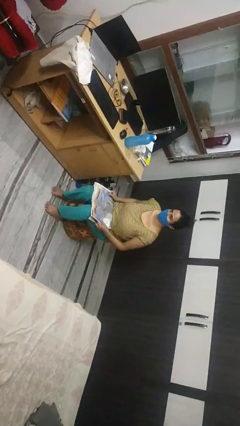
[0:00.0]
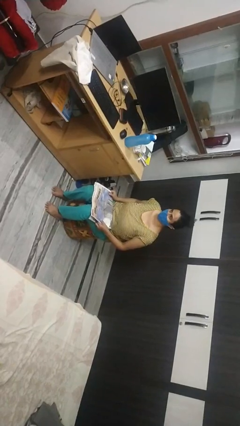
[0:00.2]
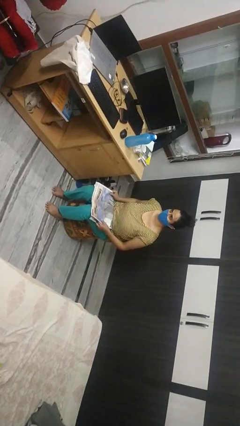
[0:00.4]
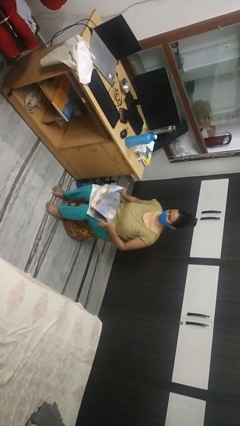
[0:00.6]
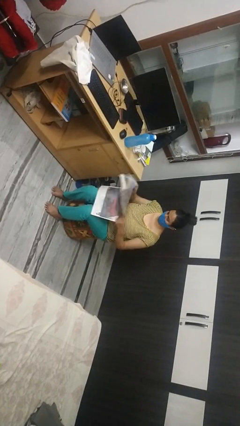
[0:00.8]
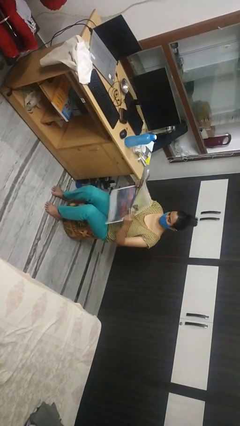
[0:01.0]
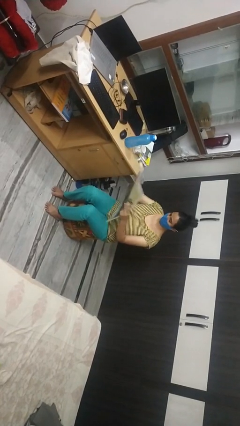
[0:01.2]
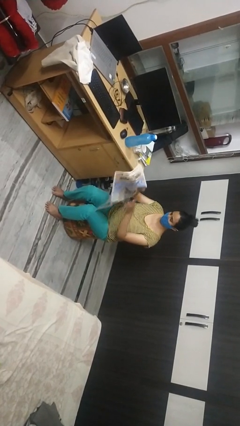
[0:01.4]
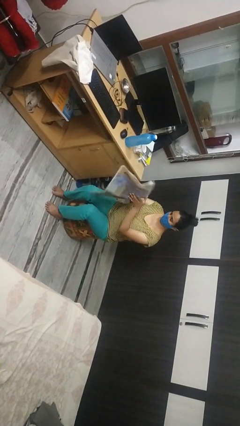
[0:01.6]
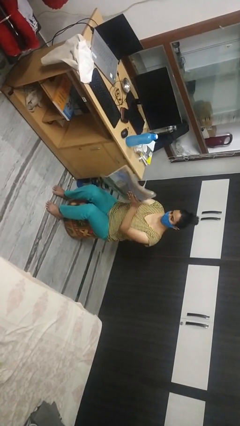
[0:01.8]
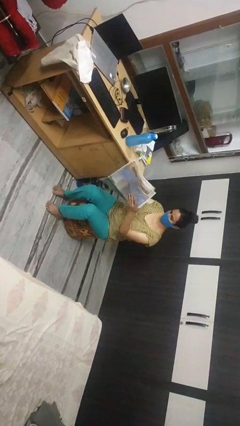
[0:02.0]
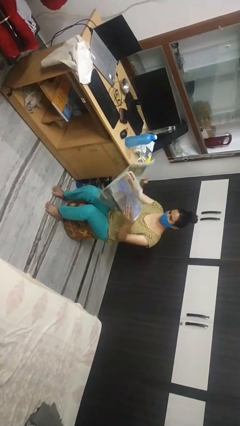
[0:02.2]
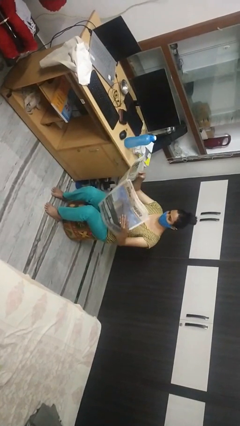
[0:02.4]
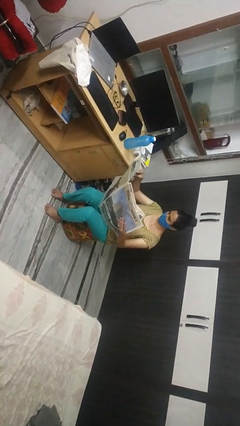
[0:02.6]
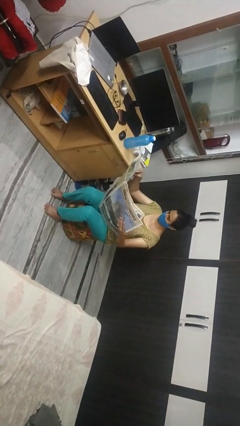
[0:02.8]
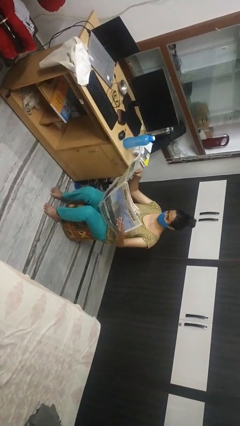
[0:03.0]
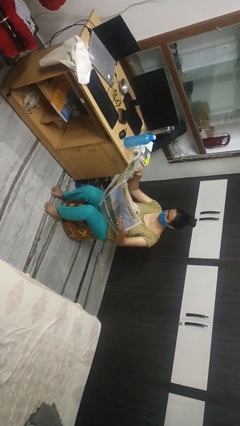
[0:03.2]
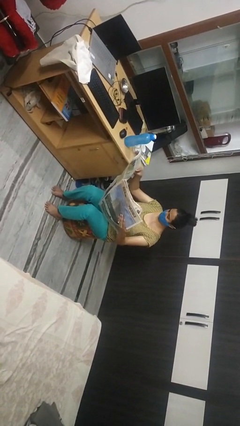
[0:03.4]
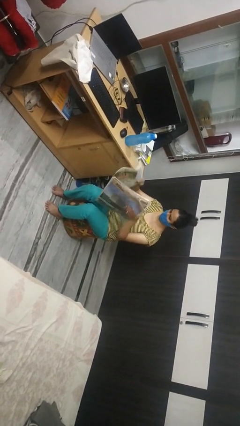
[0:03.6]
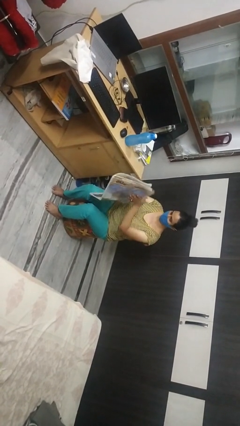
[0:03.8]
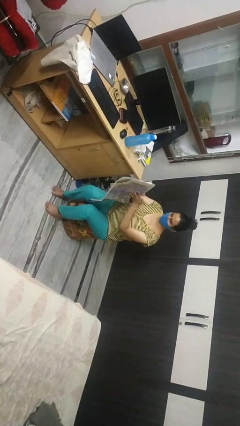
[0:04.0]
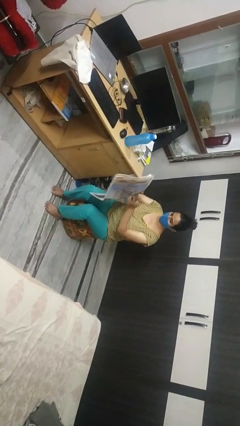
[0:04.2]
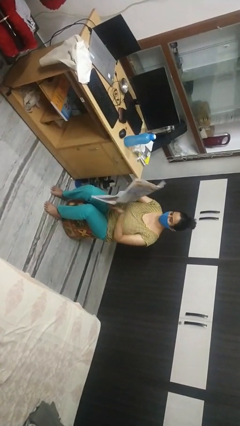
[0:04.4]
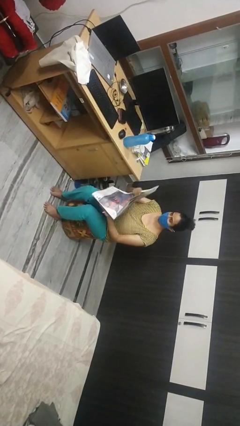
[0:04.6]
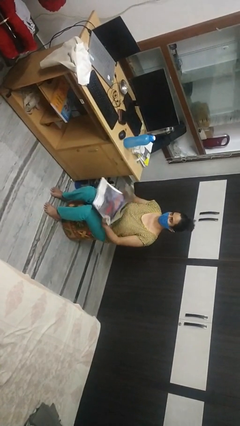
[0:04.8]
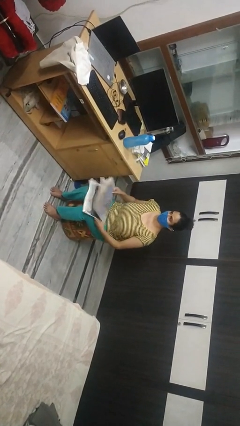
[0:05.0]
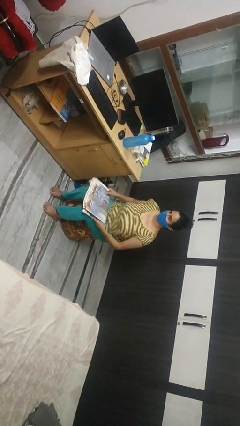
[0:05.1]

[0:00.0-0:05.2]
person reads newspaper

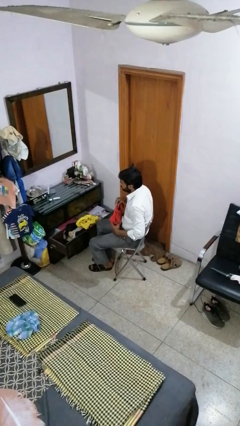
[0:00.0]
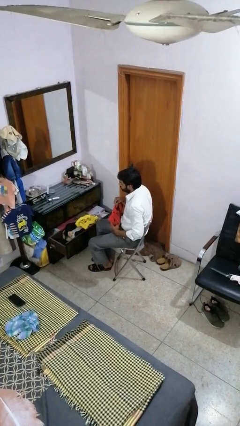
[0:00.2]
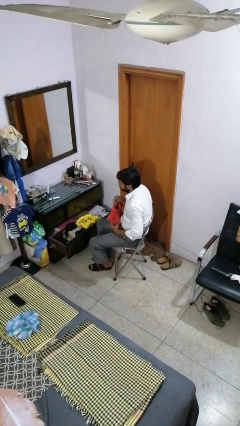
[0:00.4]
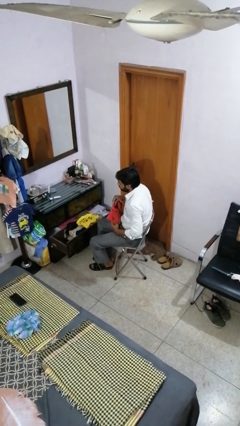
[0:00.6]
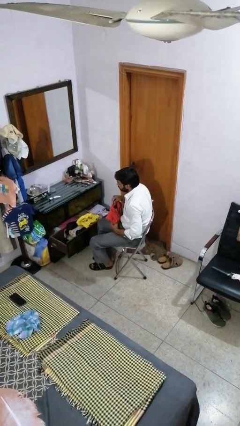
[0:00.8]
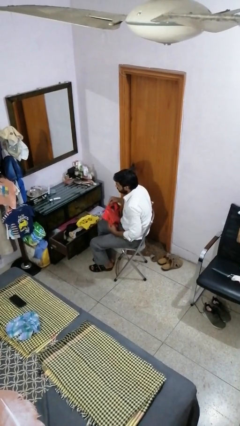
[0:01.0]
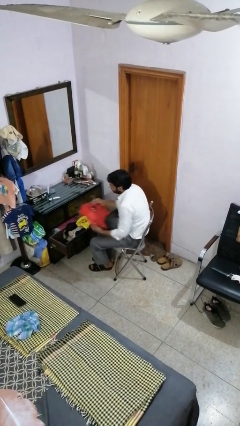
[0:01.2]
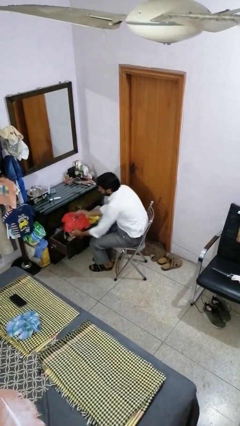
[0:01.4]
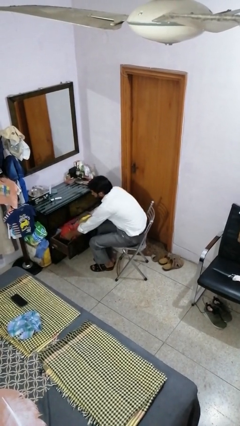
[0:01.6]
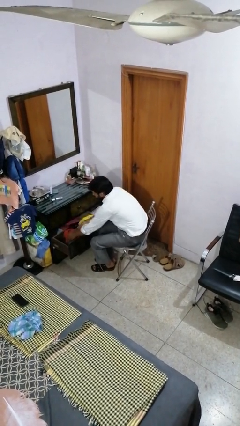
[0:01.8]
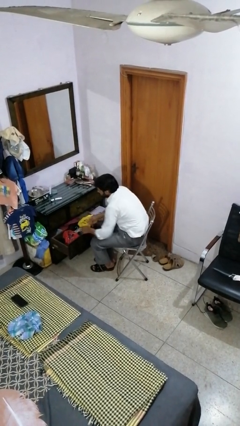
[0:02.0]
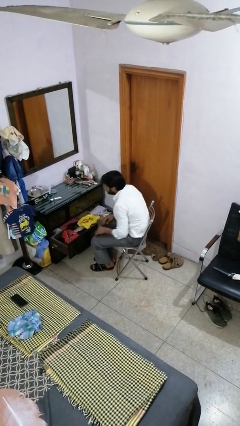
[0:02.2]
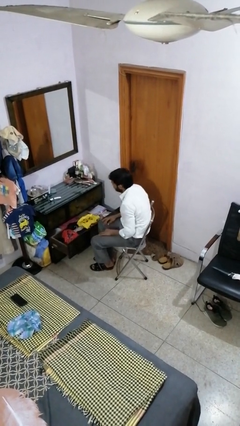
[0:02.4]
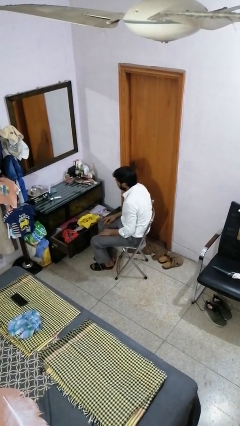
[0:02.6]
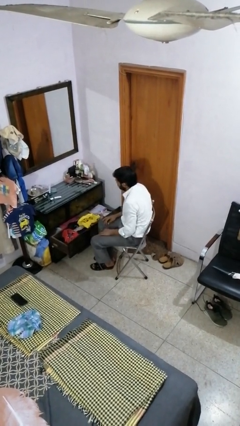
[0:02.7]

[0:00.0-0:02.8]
person puts clothes into dresser

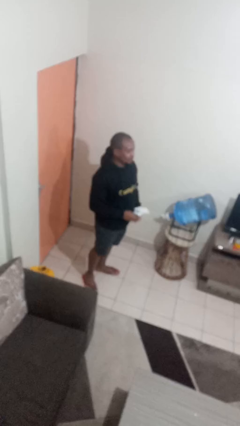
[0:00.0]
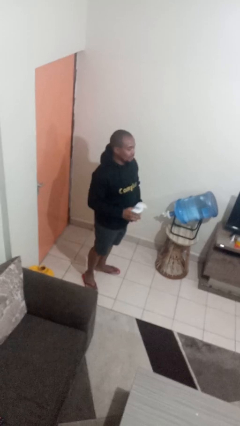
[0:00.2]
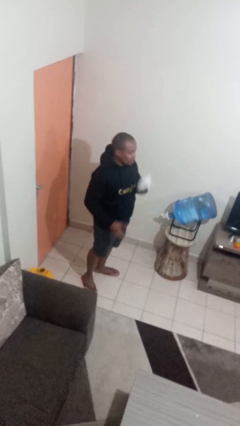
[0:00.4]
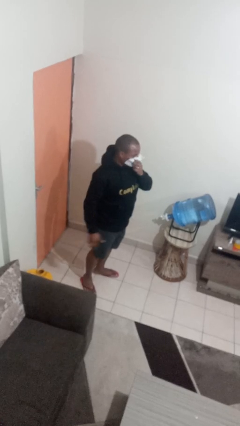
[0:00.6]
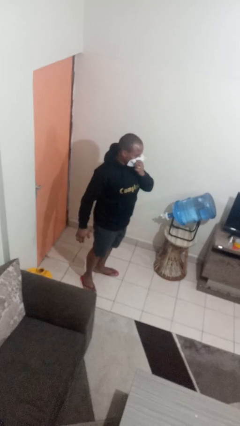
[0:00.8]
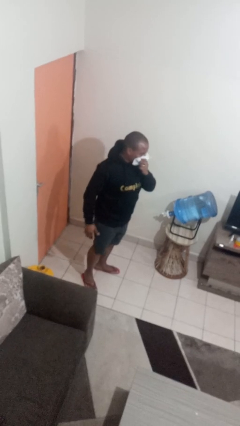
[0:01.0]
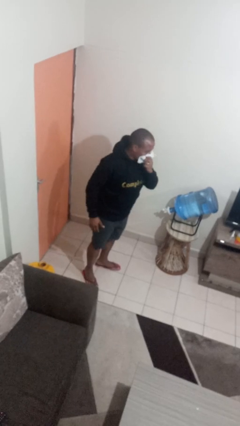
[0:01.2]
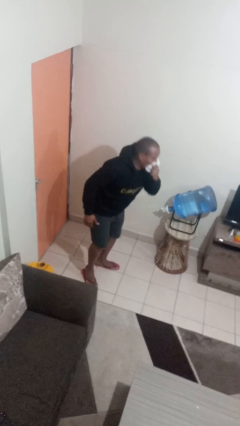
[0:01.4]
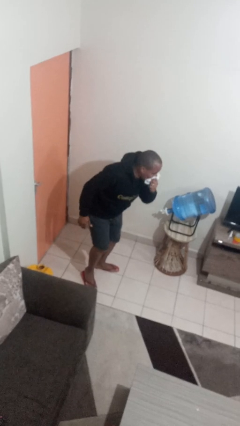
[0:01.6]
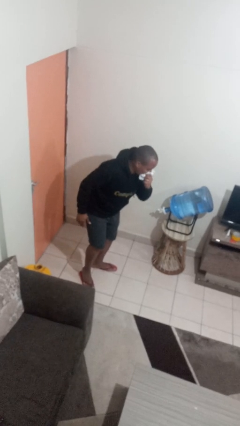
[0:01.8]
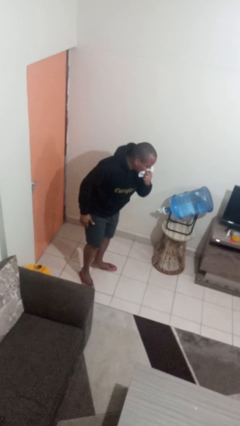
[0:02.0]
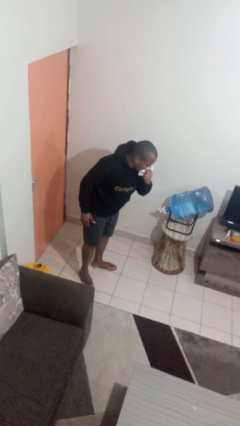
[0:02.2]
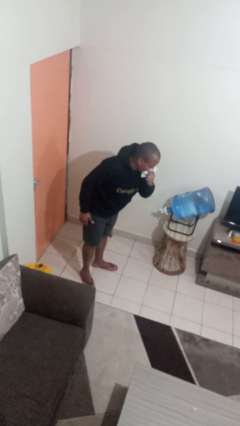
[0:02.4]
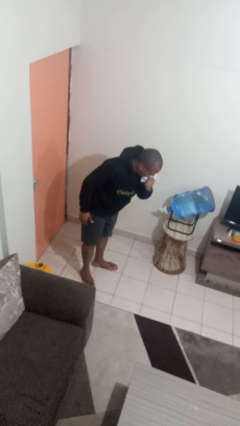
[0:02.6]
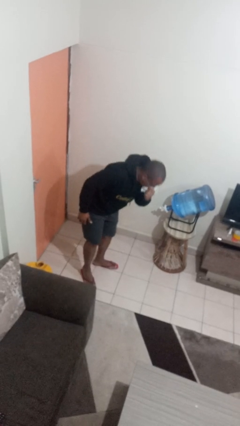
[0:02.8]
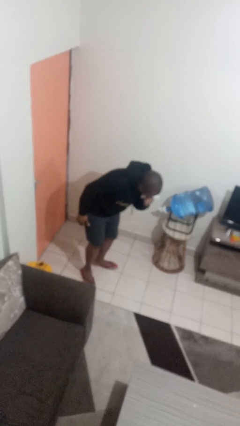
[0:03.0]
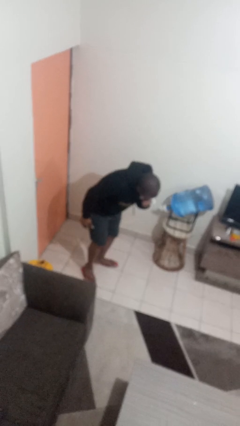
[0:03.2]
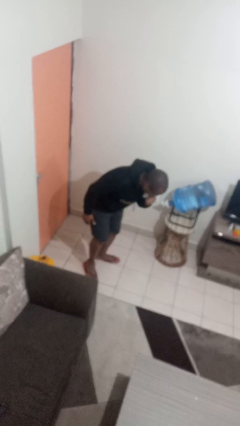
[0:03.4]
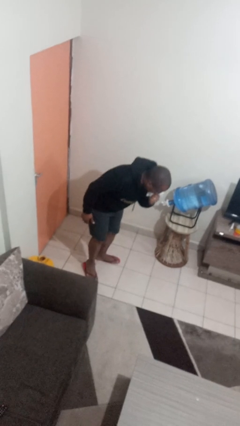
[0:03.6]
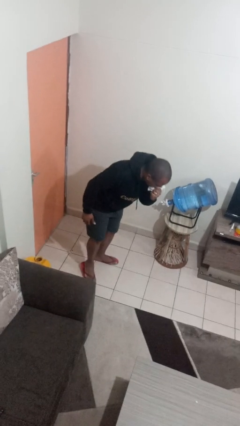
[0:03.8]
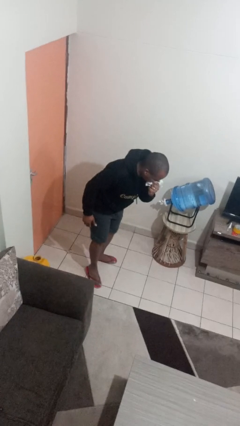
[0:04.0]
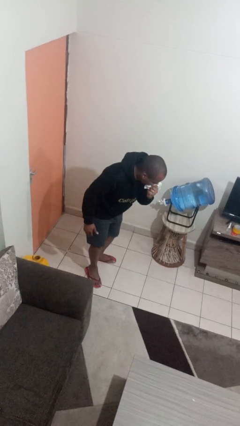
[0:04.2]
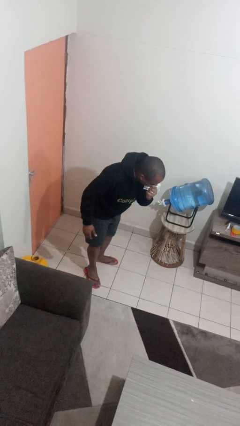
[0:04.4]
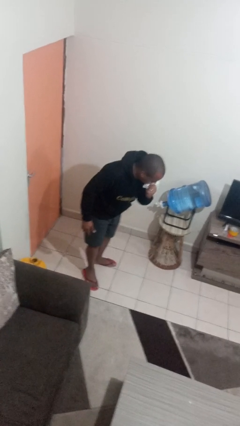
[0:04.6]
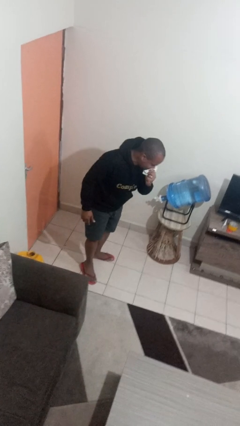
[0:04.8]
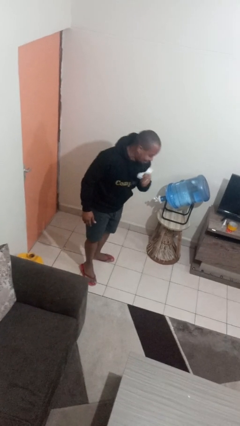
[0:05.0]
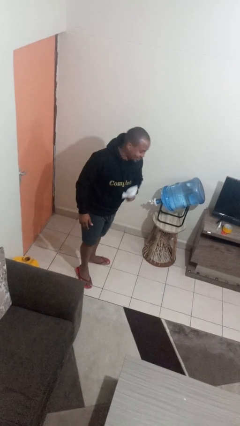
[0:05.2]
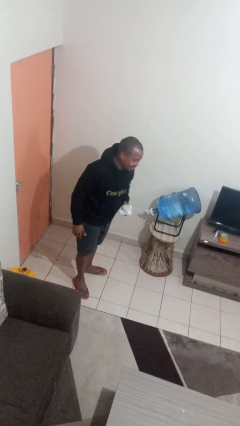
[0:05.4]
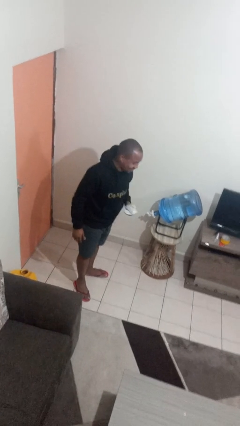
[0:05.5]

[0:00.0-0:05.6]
person blows nose

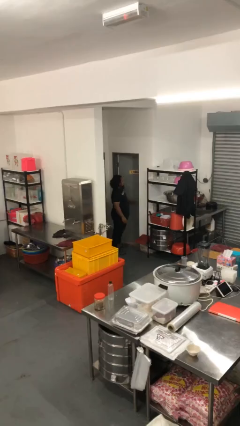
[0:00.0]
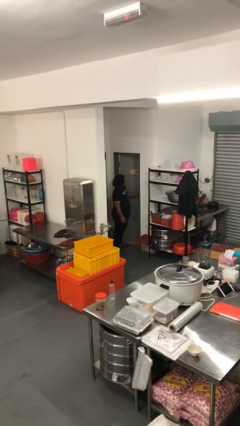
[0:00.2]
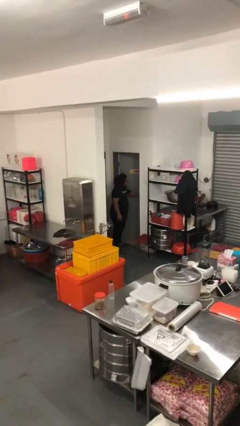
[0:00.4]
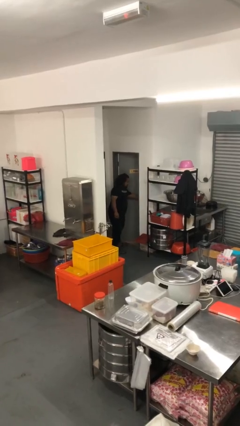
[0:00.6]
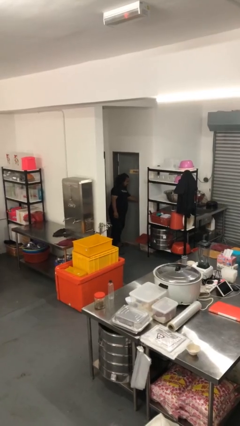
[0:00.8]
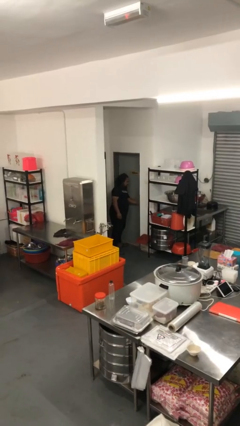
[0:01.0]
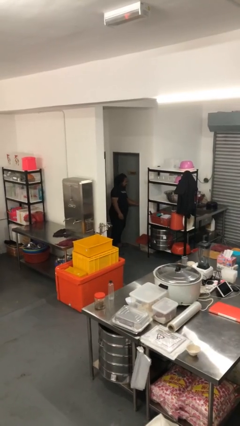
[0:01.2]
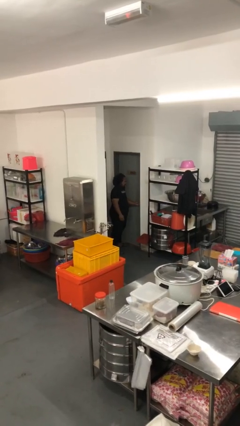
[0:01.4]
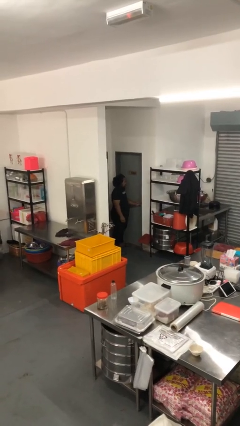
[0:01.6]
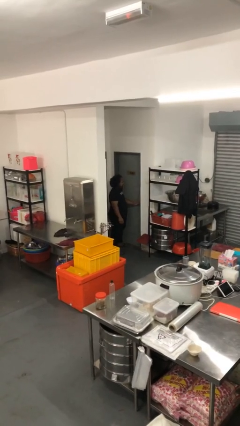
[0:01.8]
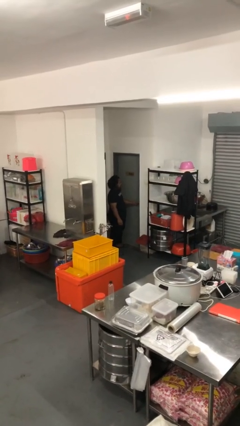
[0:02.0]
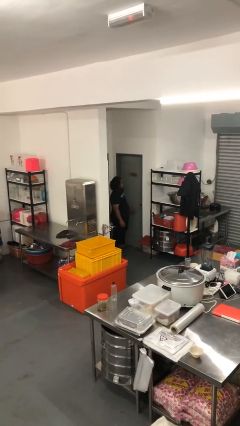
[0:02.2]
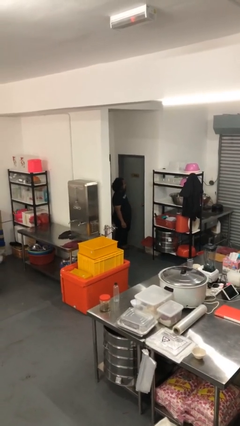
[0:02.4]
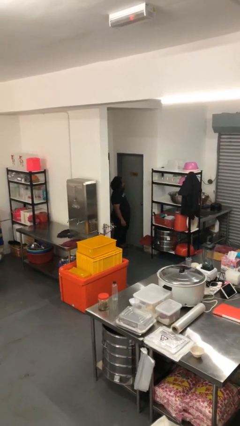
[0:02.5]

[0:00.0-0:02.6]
person closes facility door

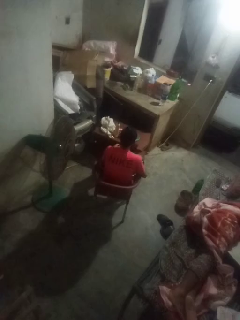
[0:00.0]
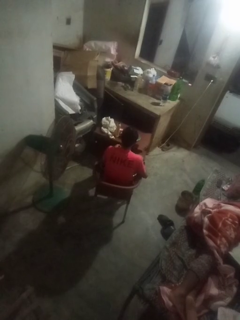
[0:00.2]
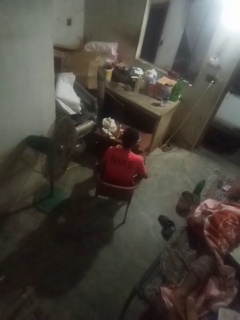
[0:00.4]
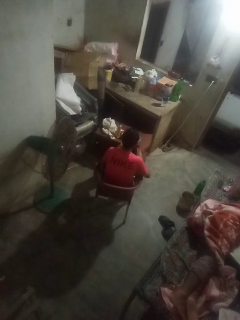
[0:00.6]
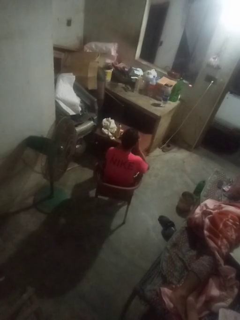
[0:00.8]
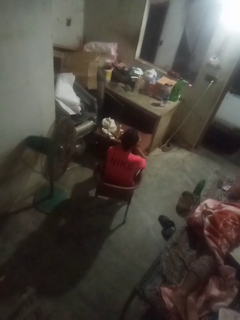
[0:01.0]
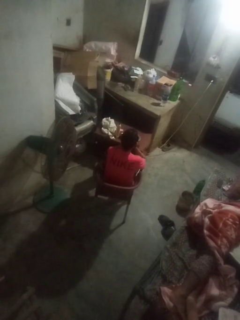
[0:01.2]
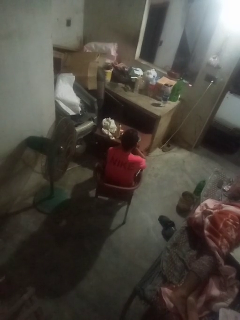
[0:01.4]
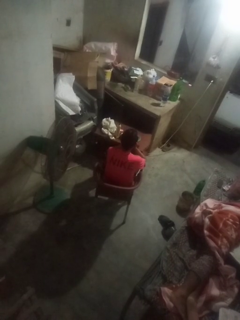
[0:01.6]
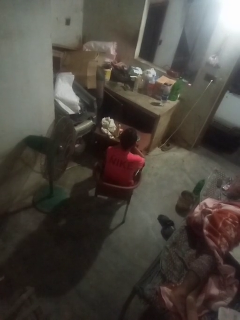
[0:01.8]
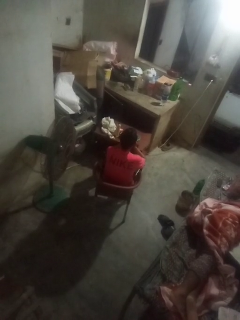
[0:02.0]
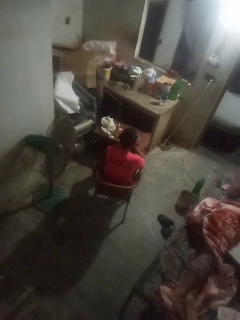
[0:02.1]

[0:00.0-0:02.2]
person yawns
